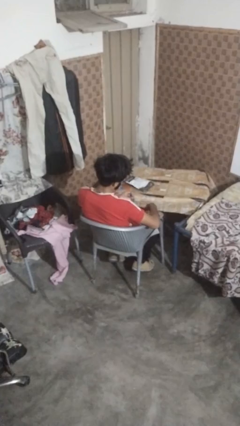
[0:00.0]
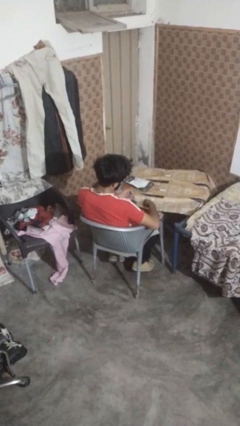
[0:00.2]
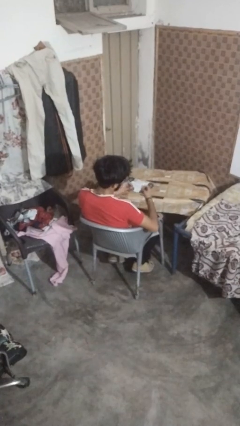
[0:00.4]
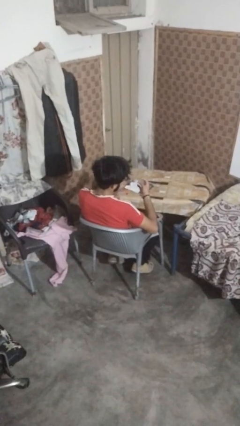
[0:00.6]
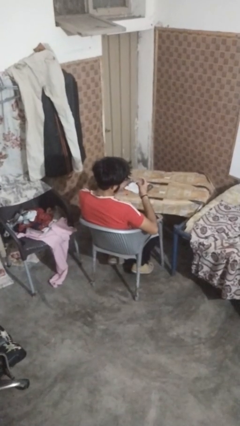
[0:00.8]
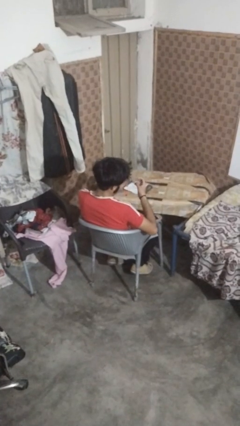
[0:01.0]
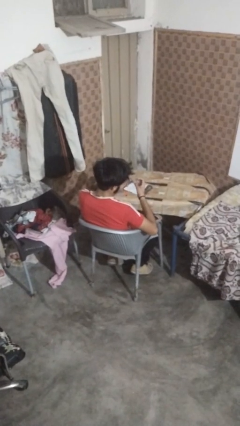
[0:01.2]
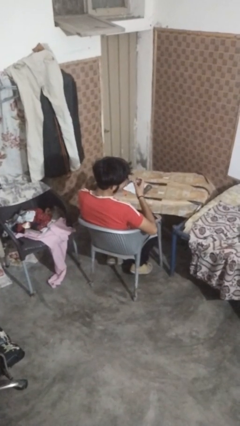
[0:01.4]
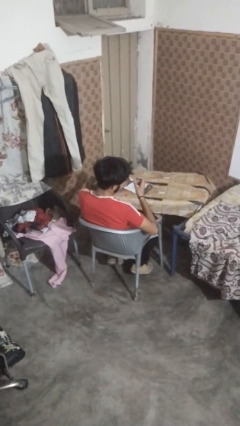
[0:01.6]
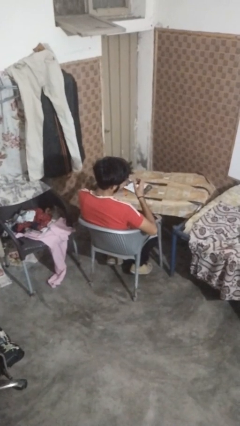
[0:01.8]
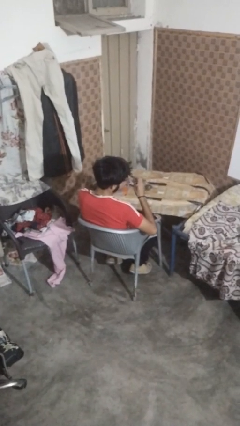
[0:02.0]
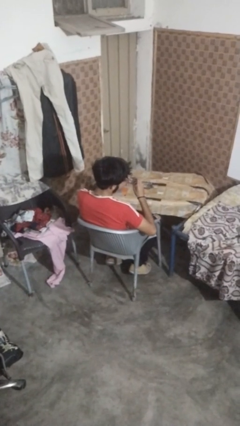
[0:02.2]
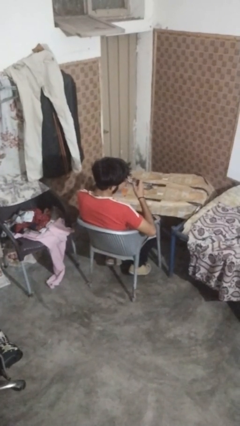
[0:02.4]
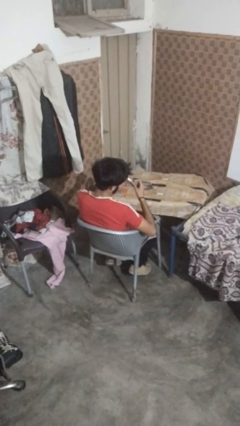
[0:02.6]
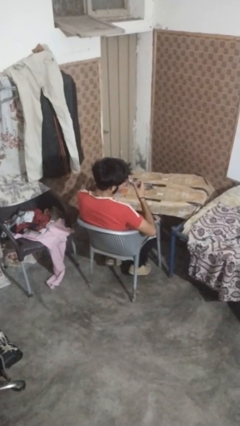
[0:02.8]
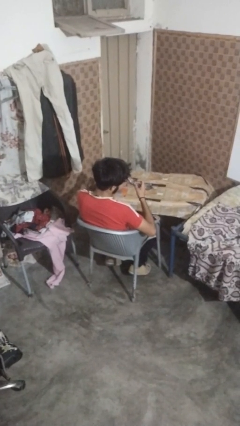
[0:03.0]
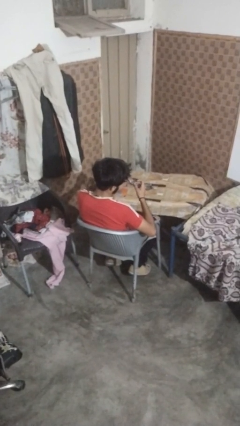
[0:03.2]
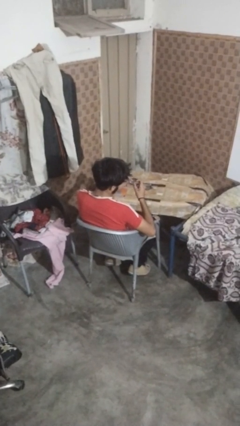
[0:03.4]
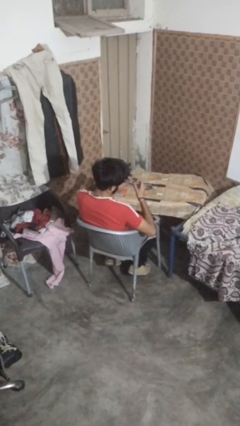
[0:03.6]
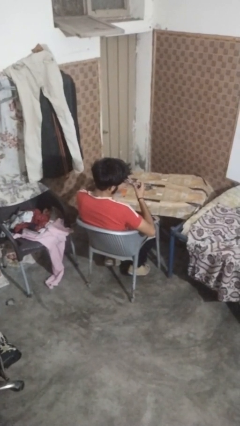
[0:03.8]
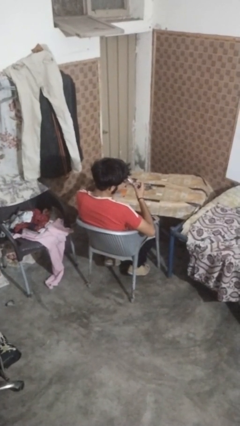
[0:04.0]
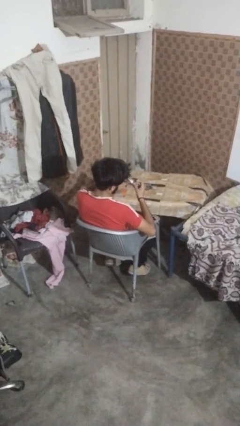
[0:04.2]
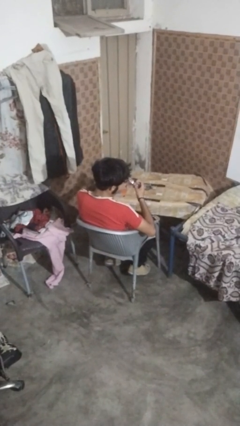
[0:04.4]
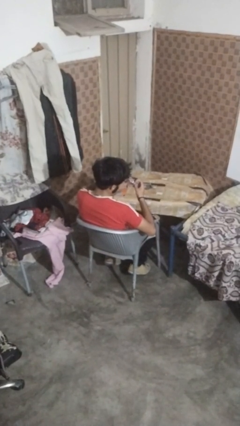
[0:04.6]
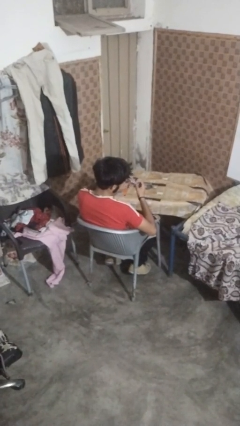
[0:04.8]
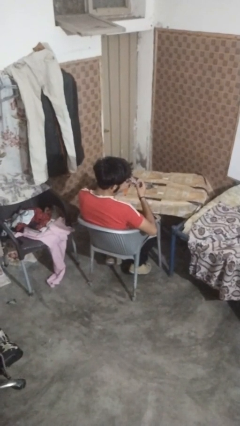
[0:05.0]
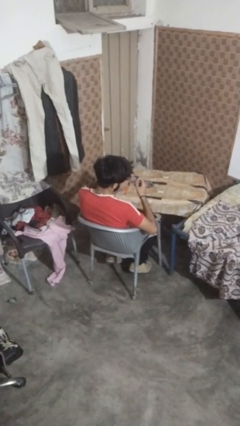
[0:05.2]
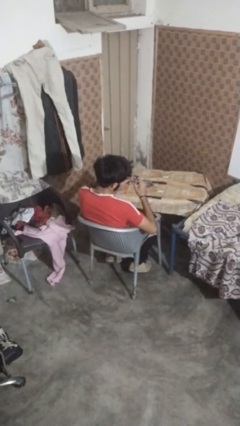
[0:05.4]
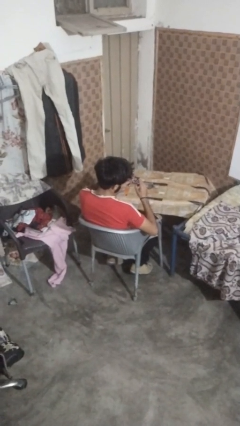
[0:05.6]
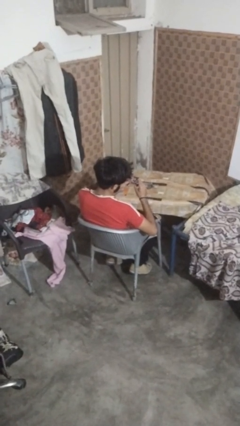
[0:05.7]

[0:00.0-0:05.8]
person clips fingernails

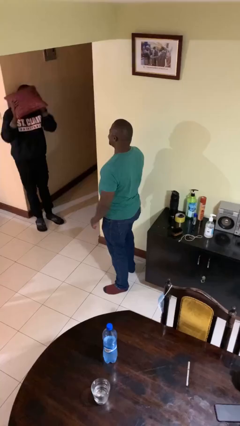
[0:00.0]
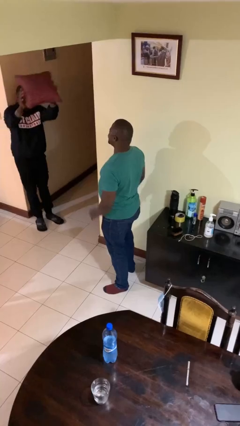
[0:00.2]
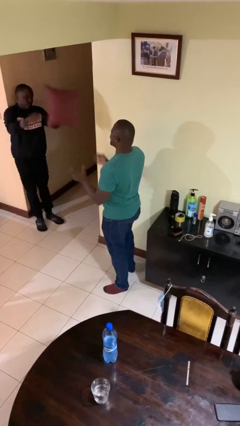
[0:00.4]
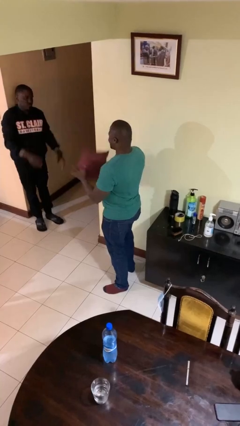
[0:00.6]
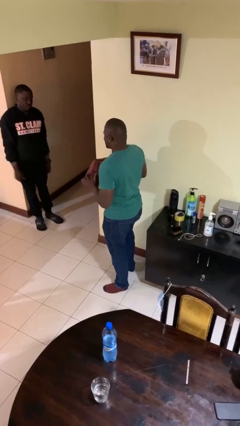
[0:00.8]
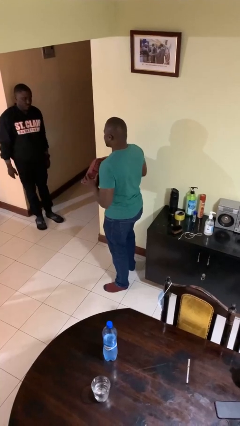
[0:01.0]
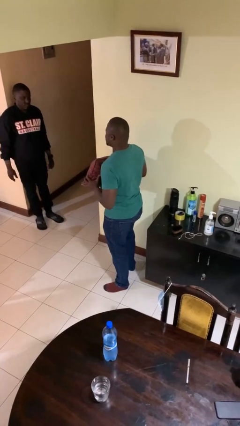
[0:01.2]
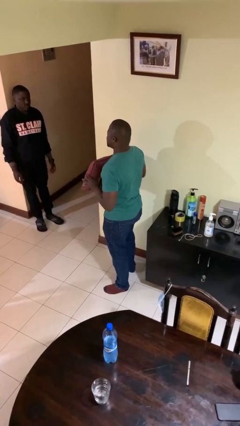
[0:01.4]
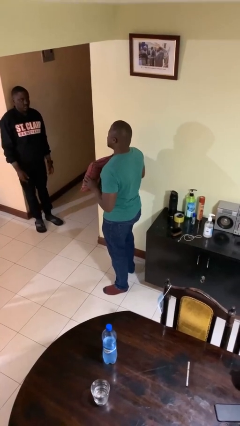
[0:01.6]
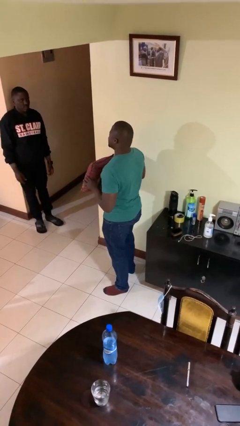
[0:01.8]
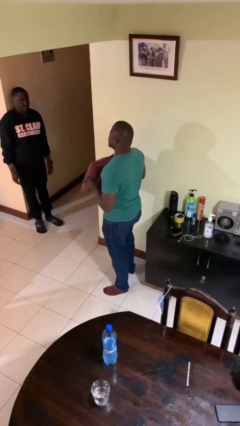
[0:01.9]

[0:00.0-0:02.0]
person catches object from person

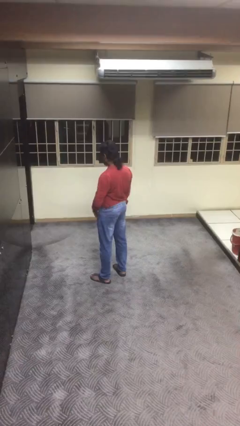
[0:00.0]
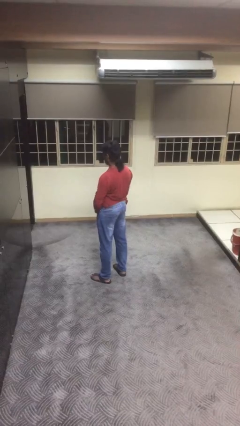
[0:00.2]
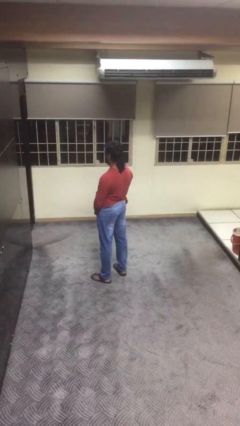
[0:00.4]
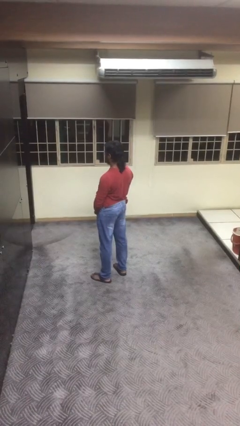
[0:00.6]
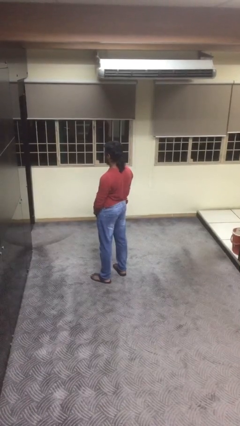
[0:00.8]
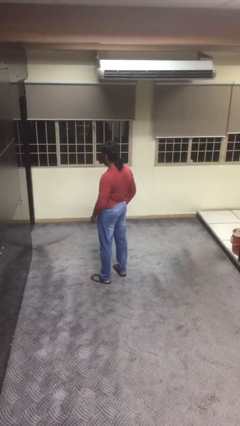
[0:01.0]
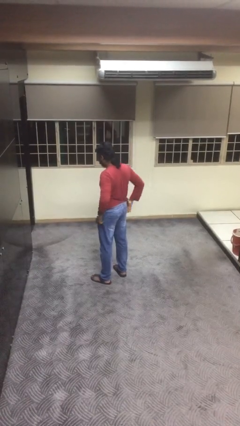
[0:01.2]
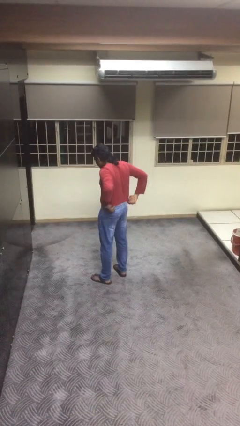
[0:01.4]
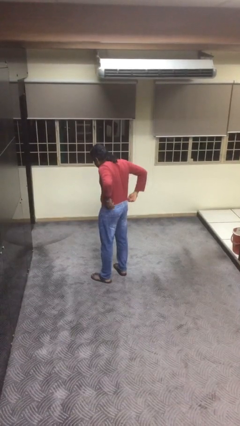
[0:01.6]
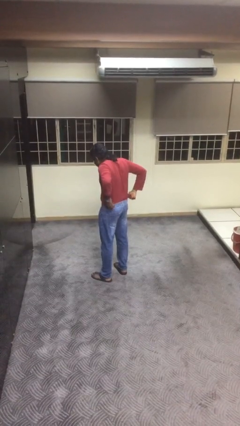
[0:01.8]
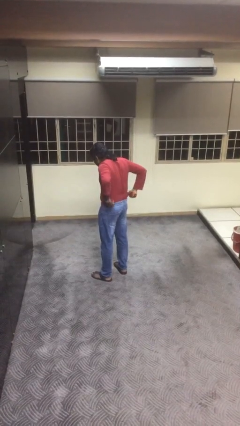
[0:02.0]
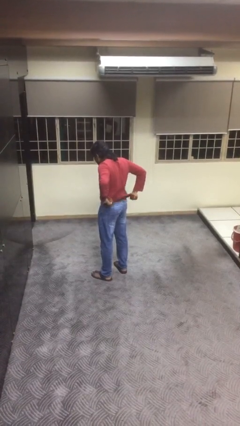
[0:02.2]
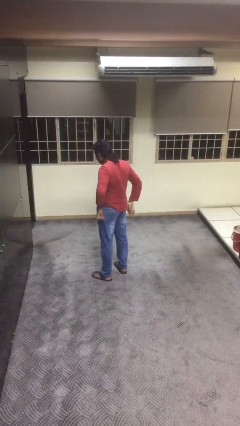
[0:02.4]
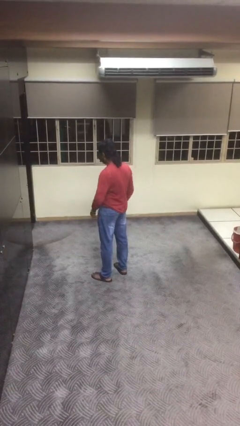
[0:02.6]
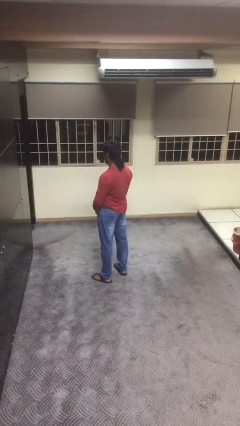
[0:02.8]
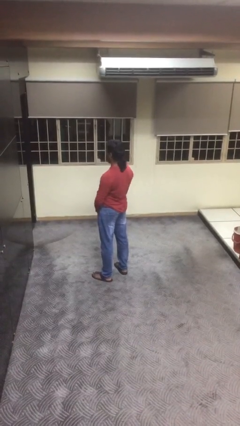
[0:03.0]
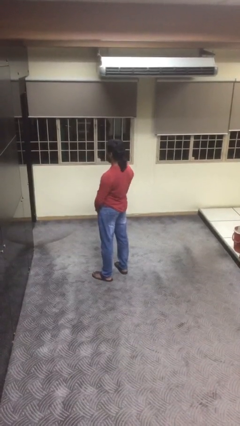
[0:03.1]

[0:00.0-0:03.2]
person untucks shirt

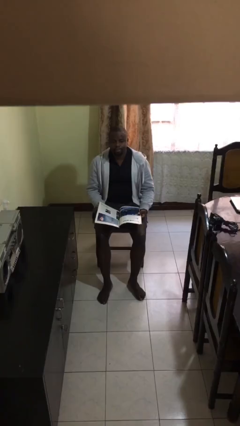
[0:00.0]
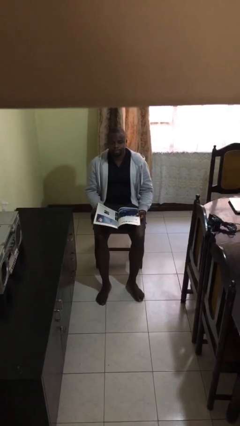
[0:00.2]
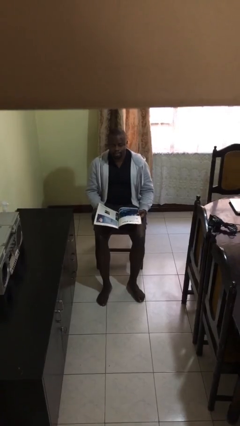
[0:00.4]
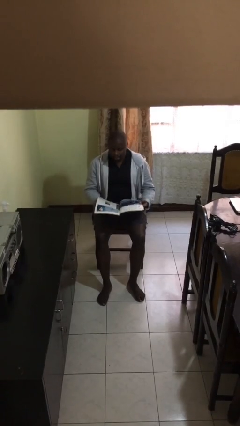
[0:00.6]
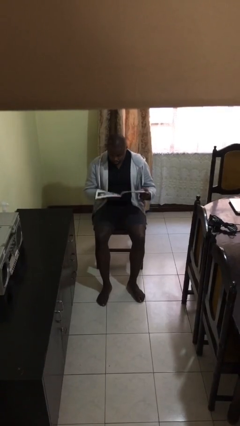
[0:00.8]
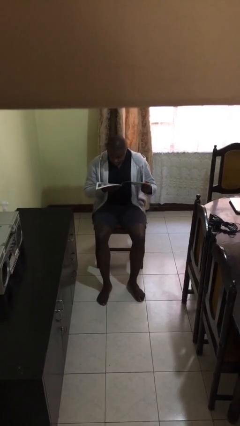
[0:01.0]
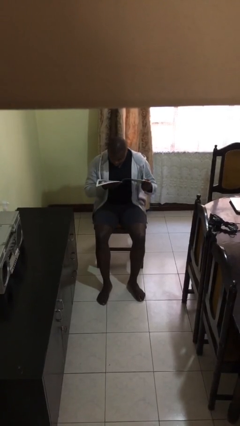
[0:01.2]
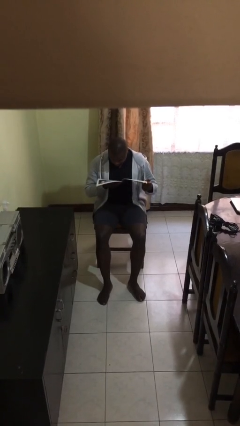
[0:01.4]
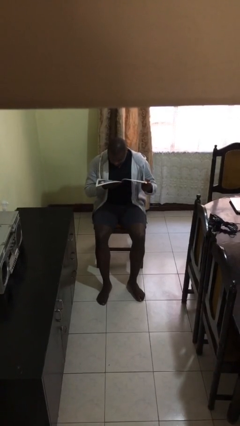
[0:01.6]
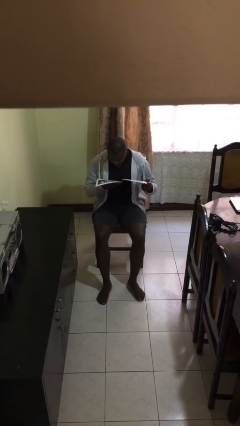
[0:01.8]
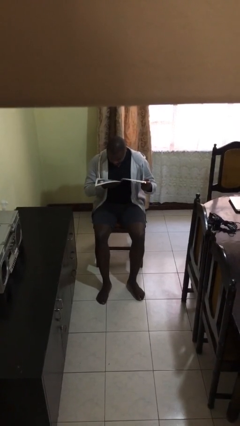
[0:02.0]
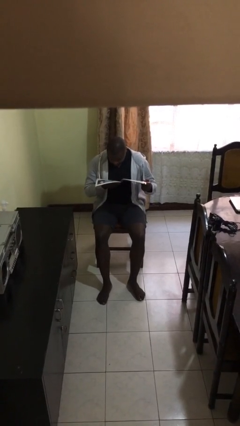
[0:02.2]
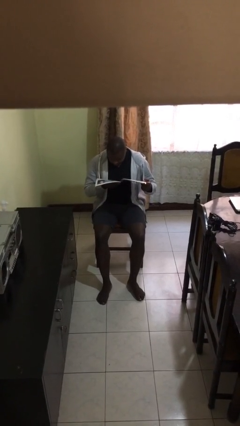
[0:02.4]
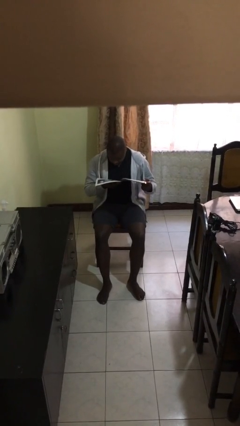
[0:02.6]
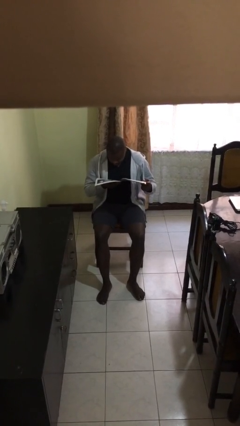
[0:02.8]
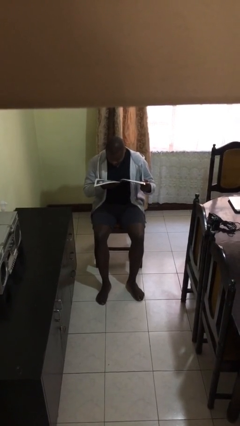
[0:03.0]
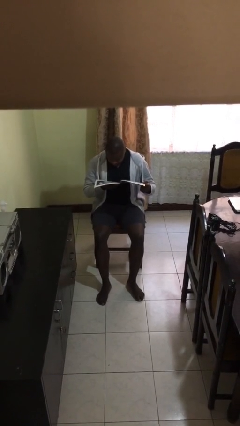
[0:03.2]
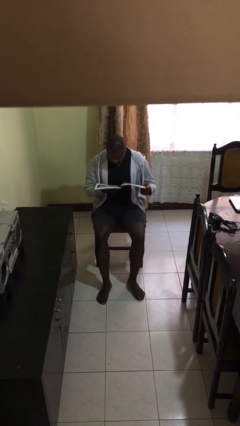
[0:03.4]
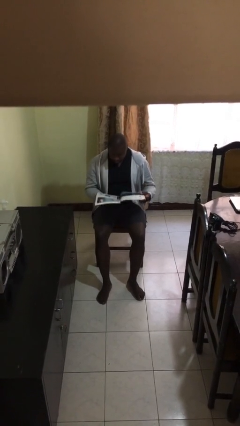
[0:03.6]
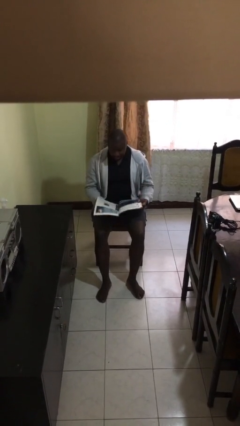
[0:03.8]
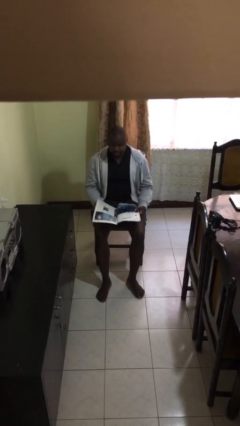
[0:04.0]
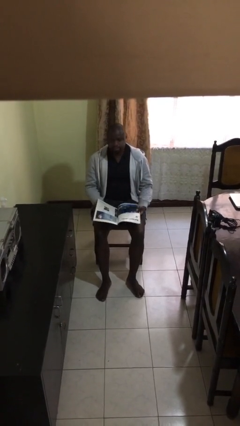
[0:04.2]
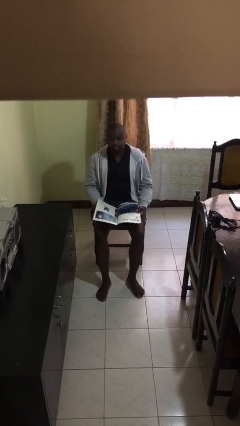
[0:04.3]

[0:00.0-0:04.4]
person reads document

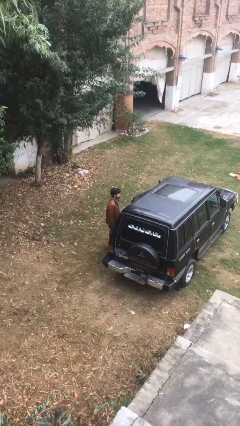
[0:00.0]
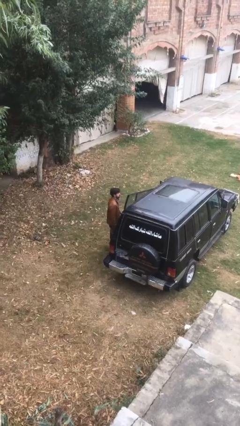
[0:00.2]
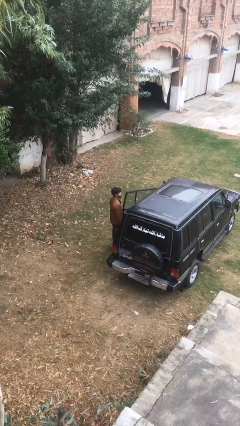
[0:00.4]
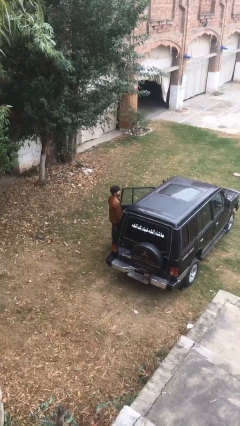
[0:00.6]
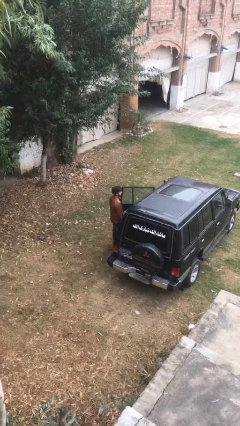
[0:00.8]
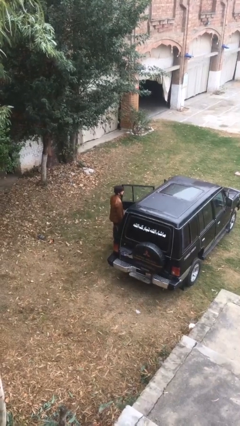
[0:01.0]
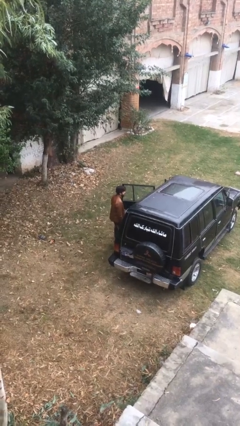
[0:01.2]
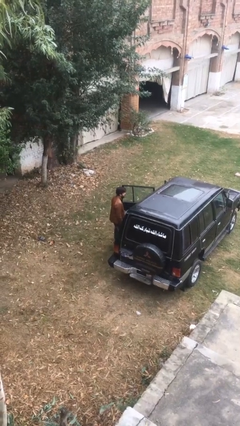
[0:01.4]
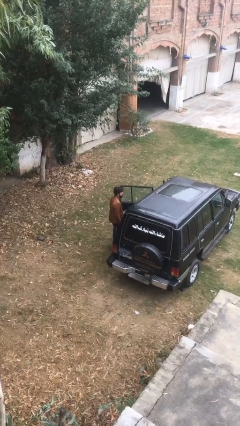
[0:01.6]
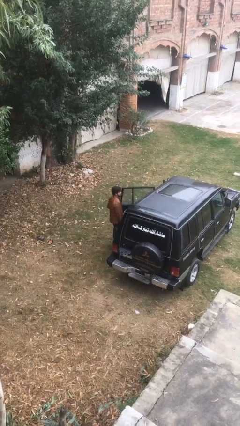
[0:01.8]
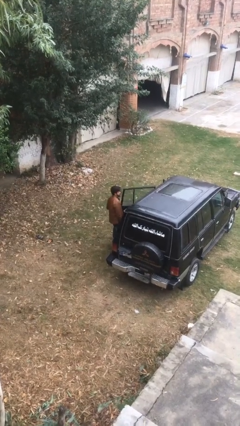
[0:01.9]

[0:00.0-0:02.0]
person opens car door

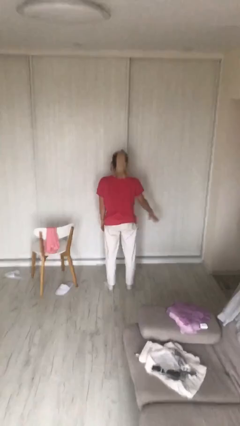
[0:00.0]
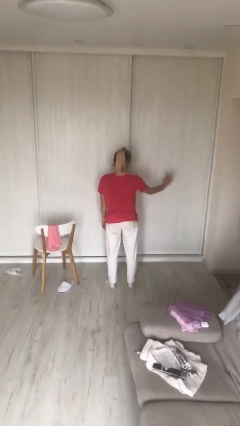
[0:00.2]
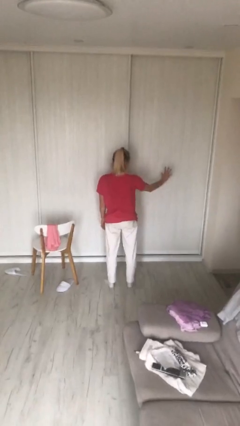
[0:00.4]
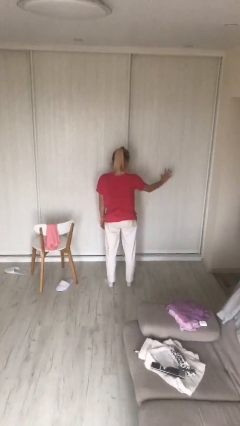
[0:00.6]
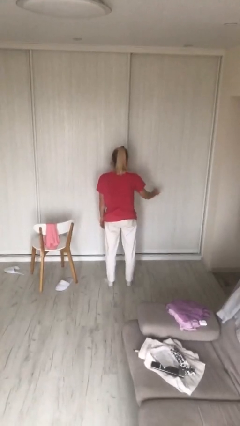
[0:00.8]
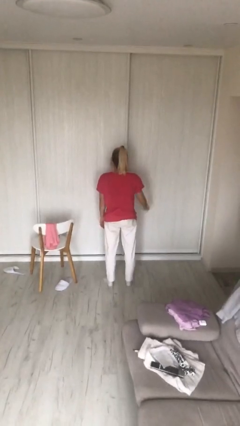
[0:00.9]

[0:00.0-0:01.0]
person gestures stop
